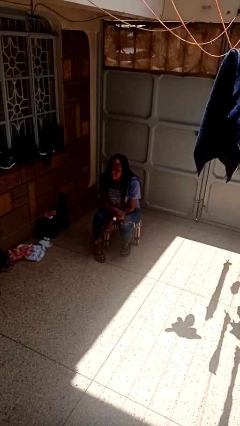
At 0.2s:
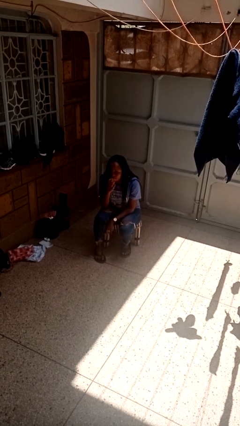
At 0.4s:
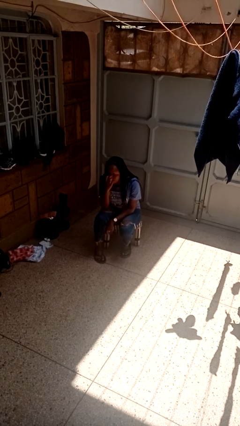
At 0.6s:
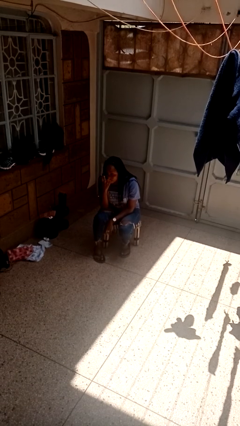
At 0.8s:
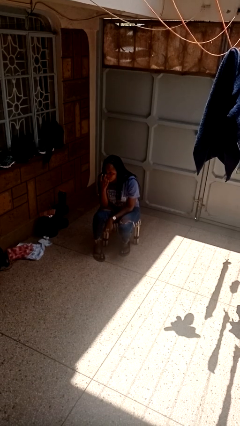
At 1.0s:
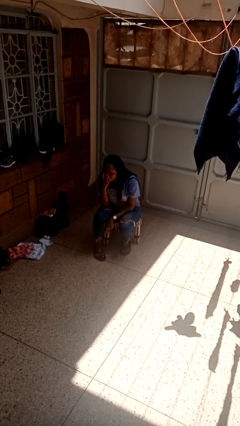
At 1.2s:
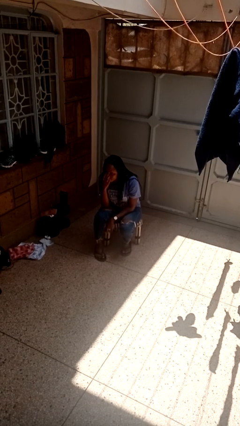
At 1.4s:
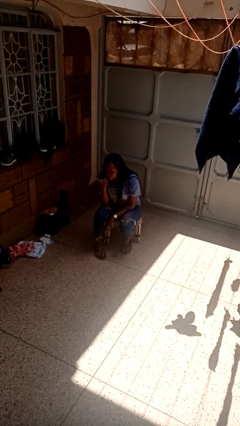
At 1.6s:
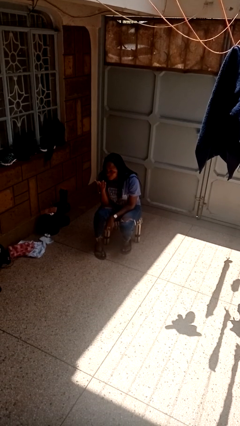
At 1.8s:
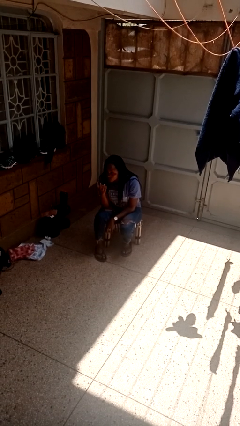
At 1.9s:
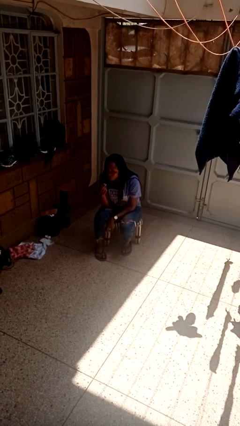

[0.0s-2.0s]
person gestures watch closely

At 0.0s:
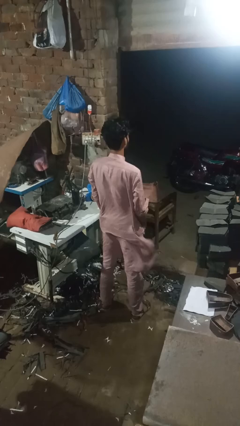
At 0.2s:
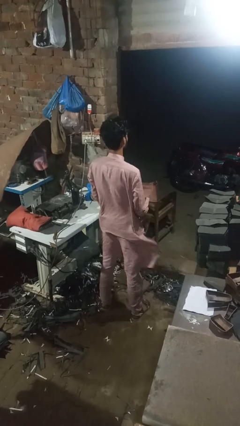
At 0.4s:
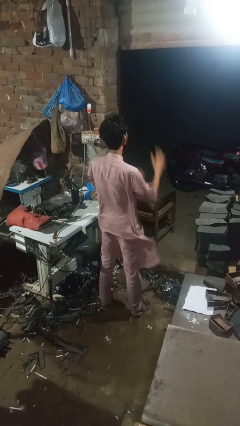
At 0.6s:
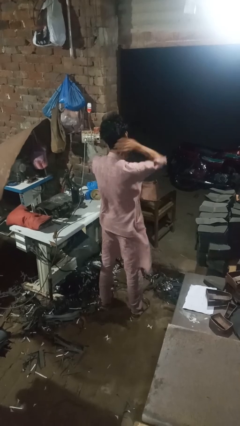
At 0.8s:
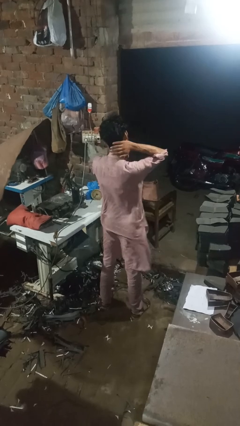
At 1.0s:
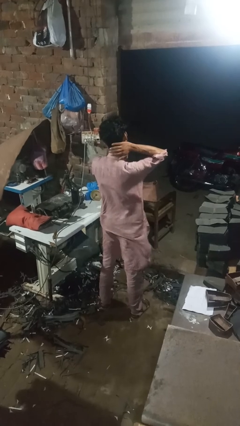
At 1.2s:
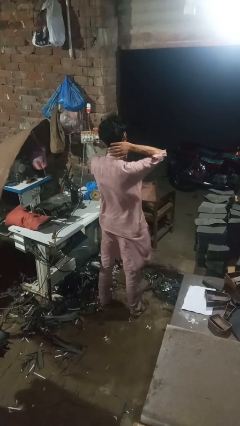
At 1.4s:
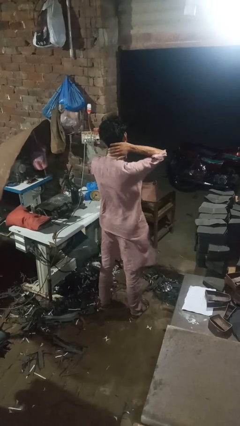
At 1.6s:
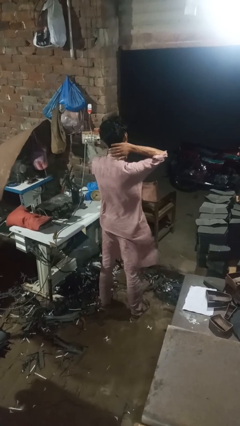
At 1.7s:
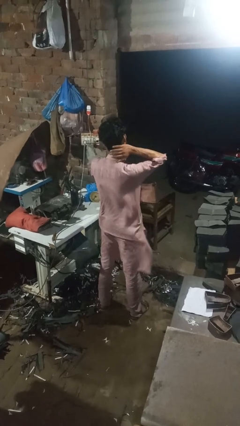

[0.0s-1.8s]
person rubs neck

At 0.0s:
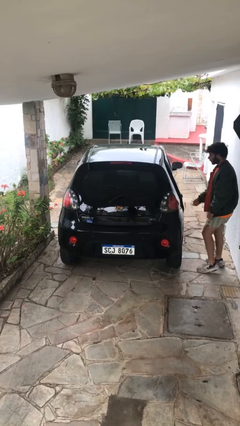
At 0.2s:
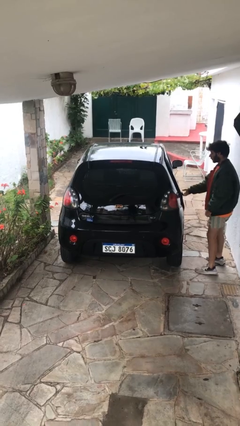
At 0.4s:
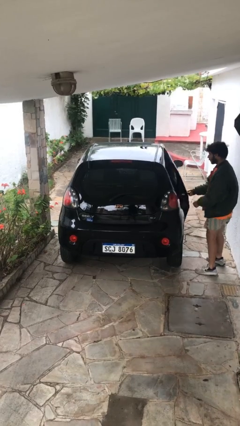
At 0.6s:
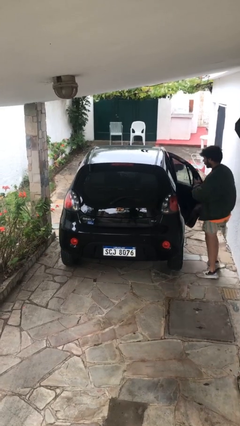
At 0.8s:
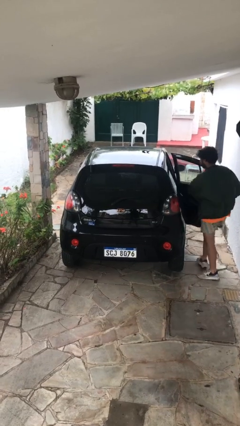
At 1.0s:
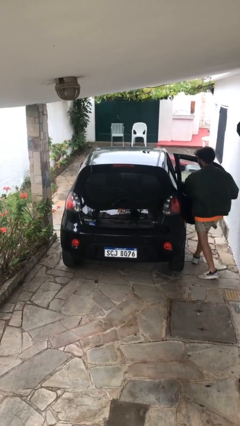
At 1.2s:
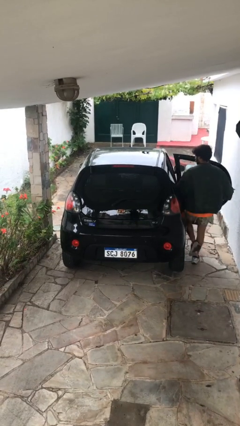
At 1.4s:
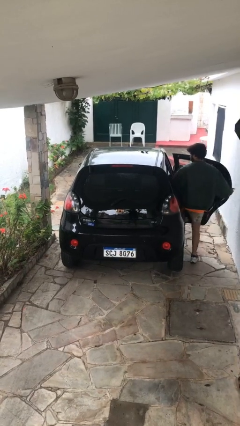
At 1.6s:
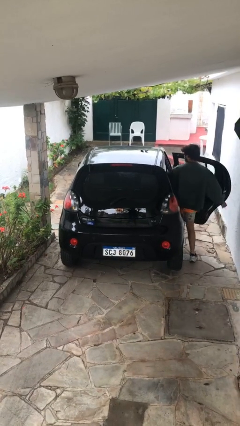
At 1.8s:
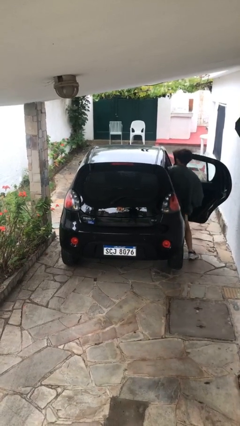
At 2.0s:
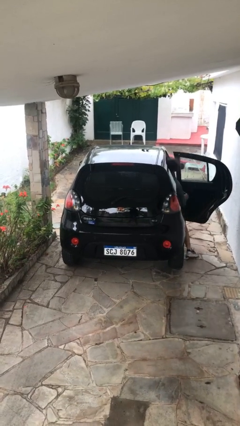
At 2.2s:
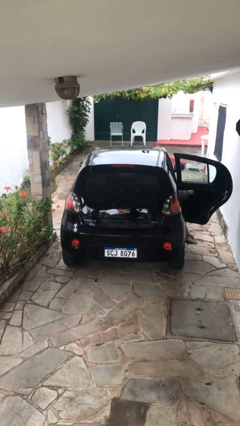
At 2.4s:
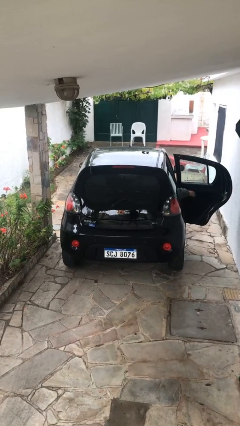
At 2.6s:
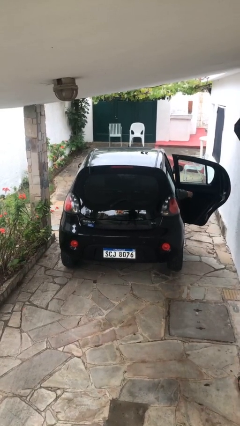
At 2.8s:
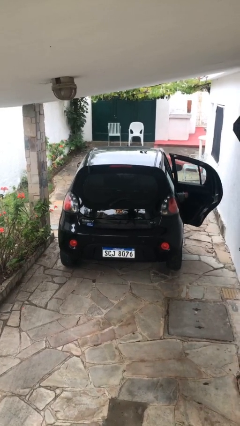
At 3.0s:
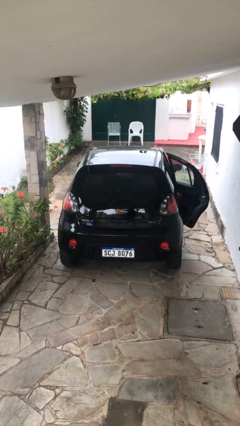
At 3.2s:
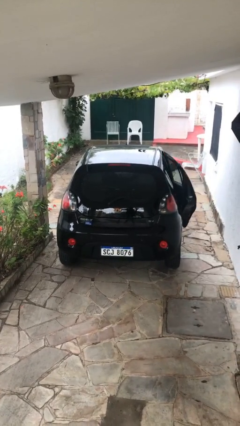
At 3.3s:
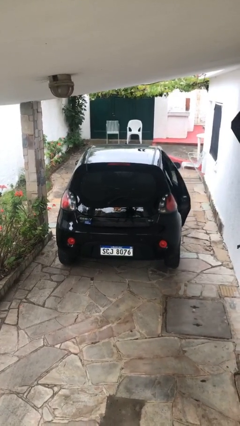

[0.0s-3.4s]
car picks up person

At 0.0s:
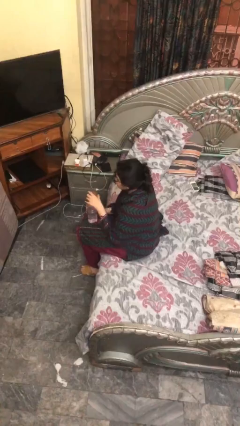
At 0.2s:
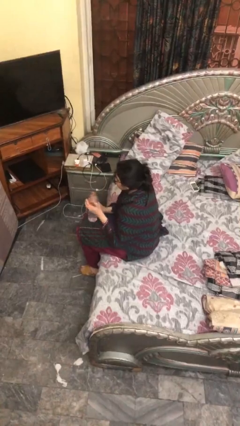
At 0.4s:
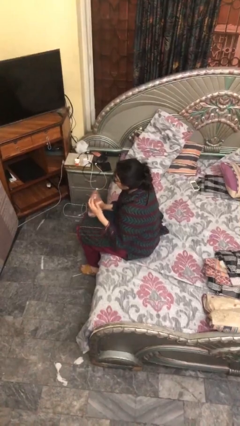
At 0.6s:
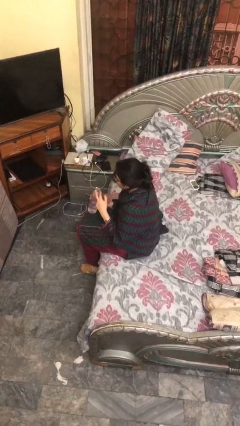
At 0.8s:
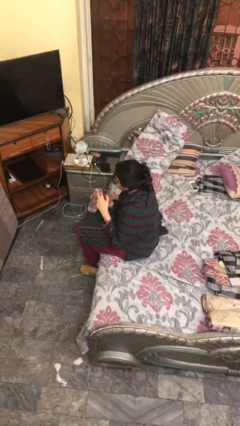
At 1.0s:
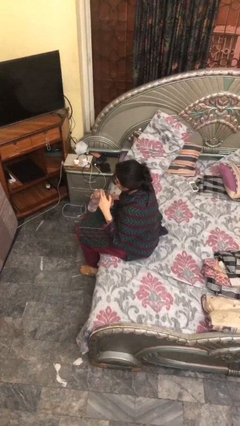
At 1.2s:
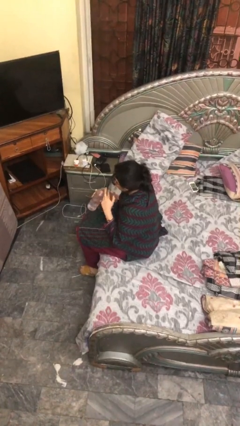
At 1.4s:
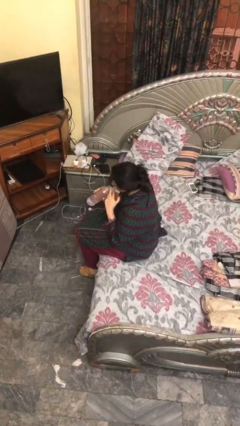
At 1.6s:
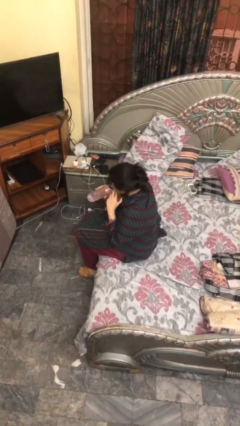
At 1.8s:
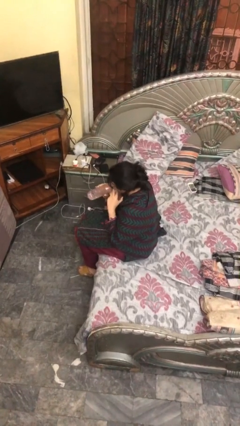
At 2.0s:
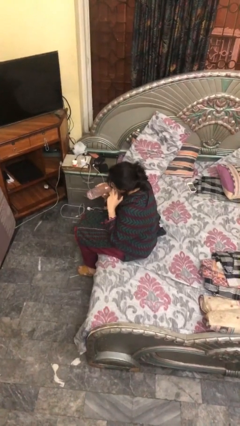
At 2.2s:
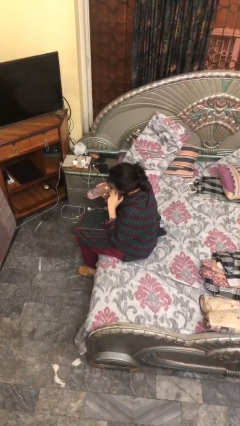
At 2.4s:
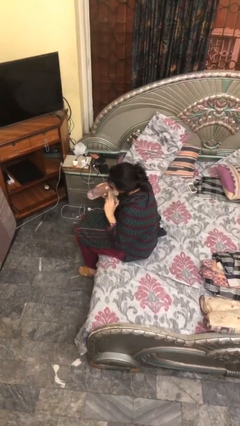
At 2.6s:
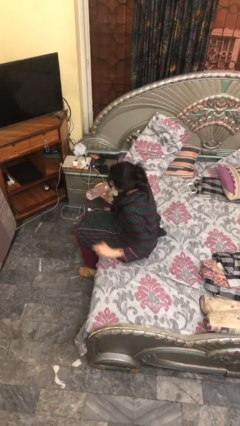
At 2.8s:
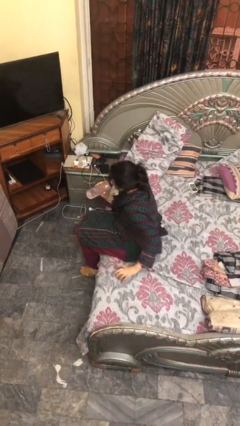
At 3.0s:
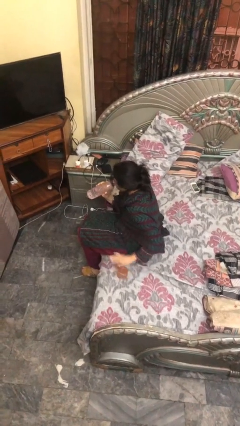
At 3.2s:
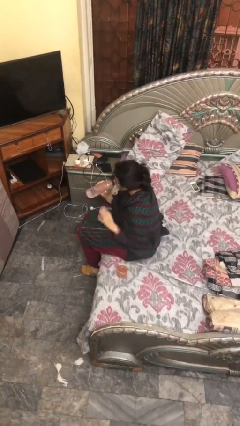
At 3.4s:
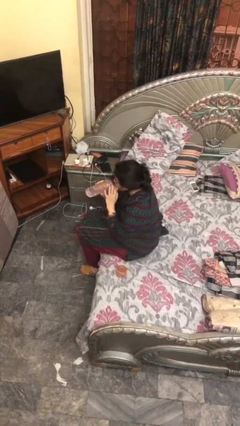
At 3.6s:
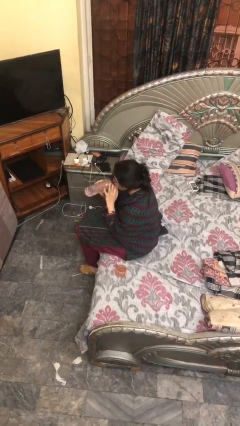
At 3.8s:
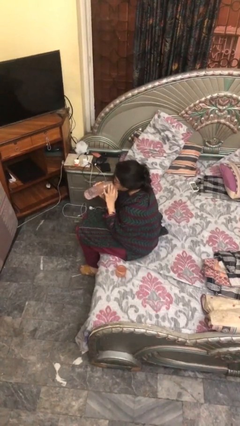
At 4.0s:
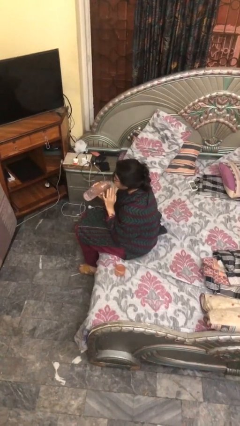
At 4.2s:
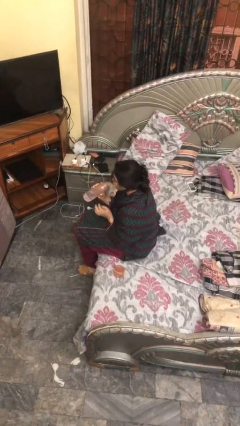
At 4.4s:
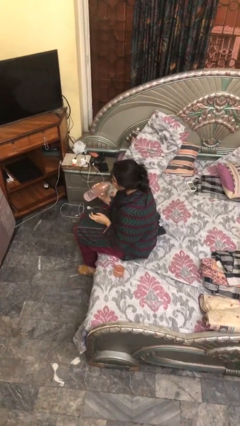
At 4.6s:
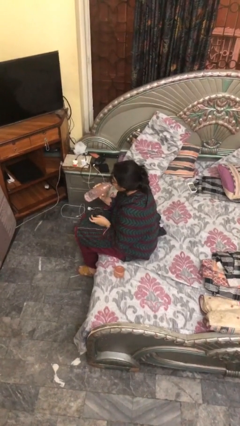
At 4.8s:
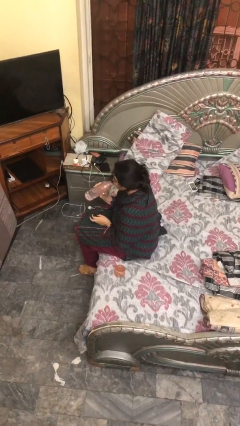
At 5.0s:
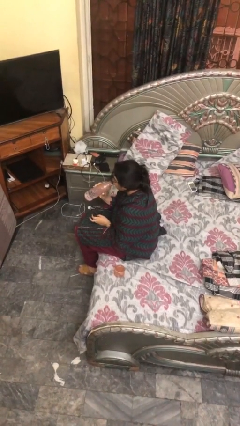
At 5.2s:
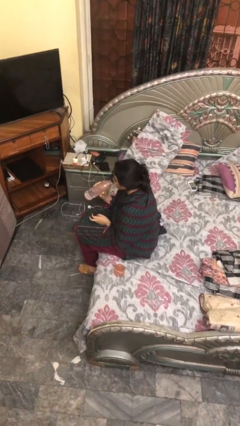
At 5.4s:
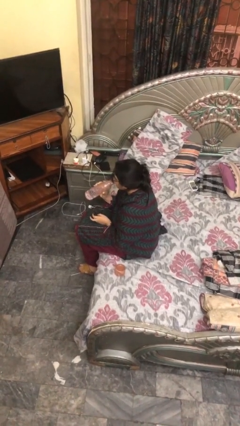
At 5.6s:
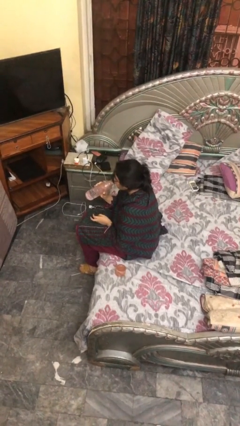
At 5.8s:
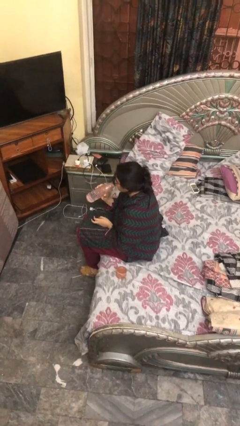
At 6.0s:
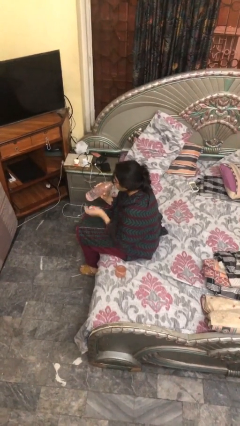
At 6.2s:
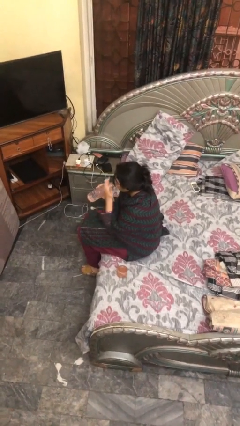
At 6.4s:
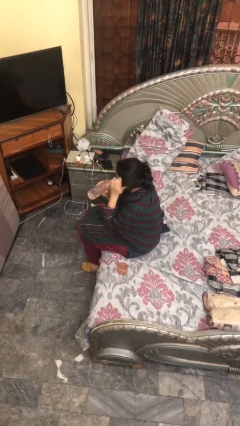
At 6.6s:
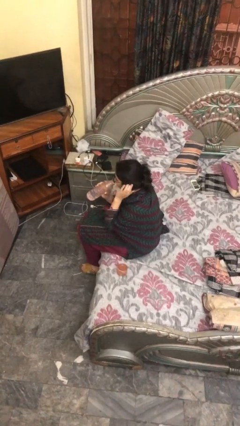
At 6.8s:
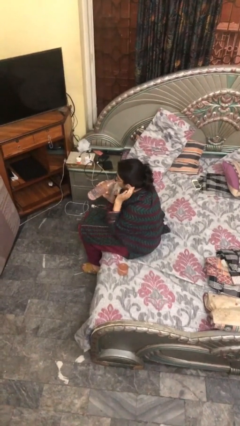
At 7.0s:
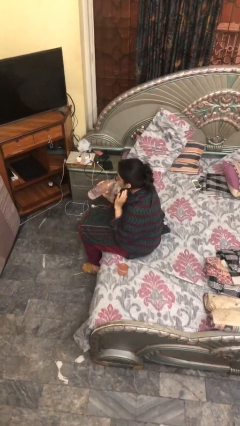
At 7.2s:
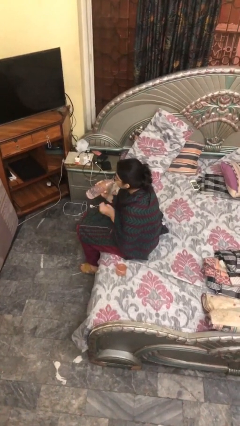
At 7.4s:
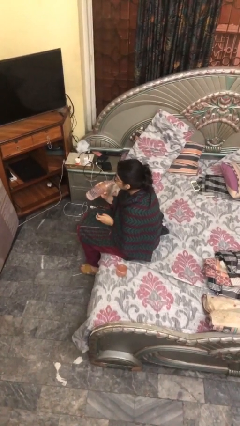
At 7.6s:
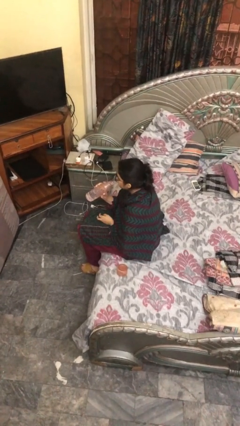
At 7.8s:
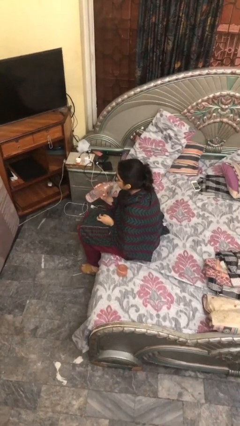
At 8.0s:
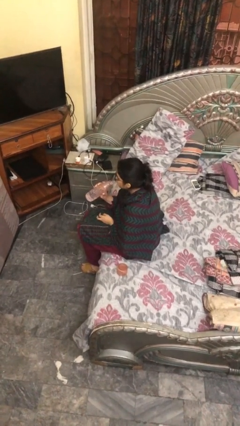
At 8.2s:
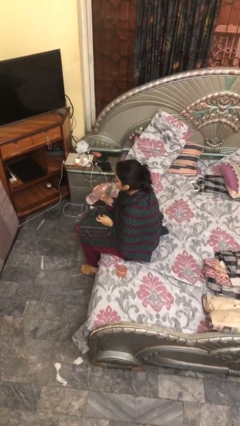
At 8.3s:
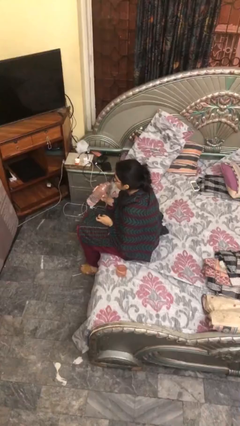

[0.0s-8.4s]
person drinks from straw

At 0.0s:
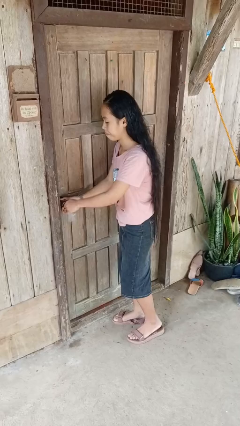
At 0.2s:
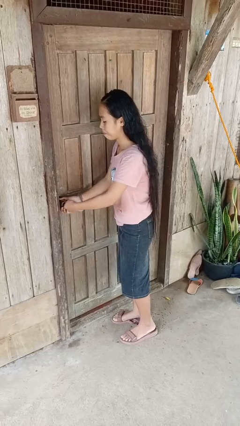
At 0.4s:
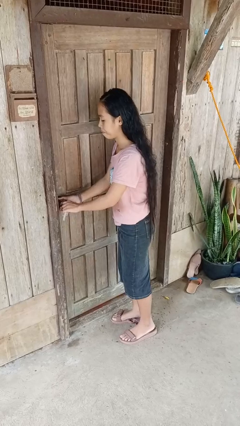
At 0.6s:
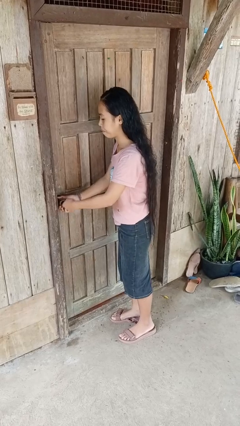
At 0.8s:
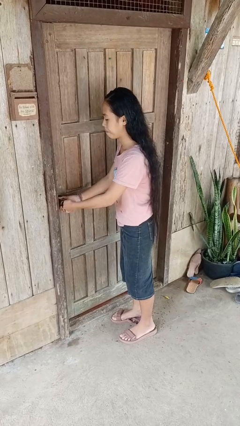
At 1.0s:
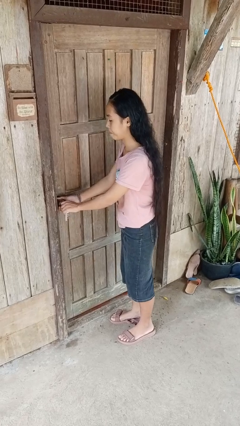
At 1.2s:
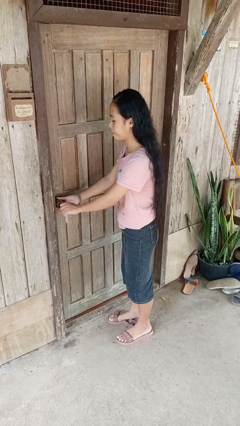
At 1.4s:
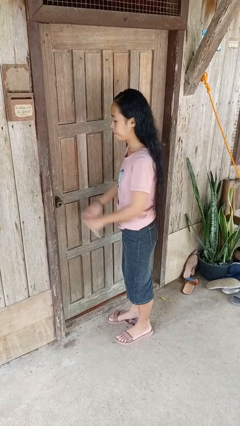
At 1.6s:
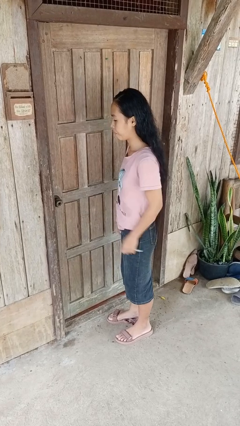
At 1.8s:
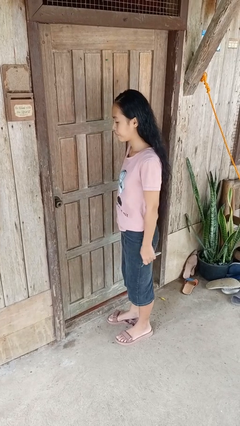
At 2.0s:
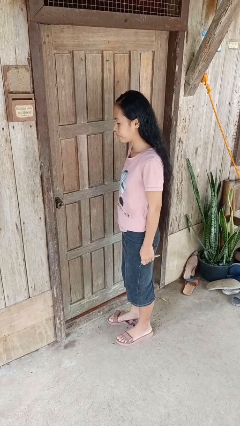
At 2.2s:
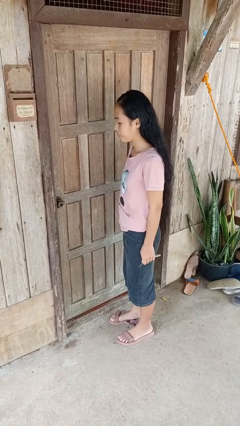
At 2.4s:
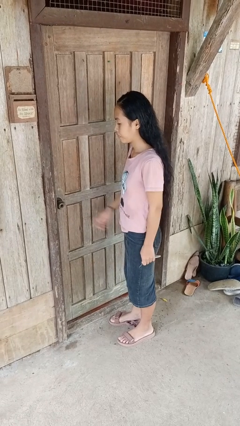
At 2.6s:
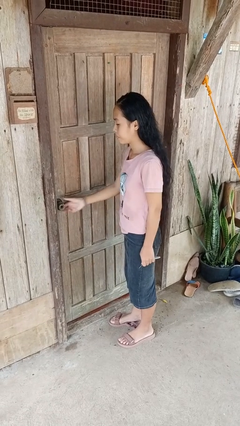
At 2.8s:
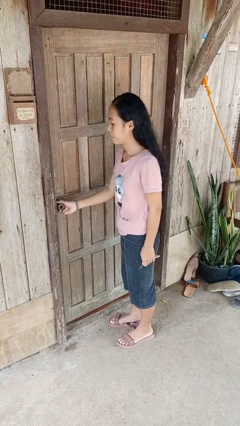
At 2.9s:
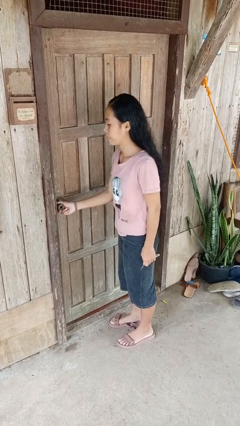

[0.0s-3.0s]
person unlocks door with keys
